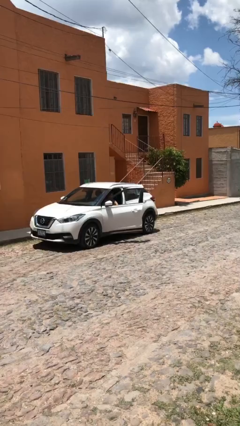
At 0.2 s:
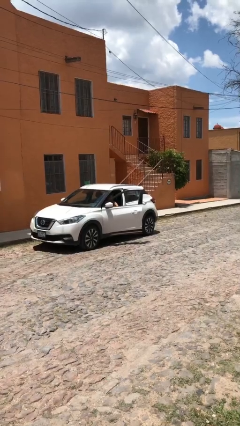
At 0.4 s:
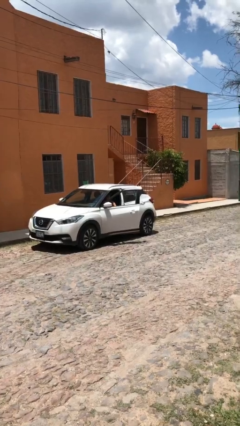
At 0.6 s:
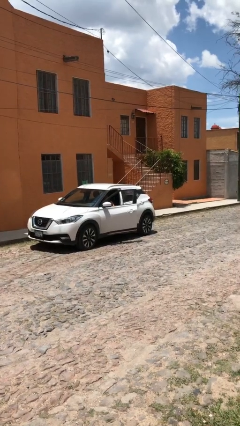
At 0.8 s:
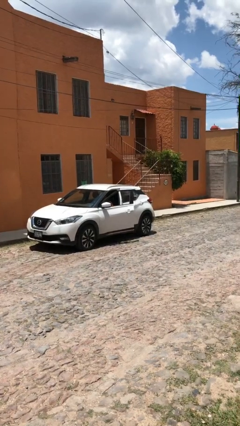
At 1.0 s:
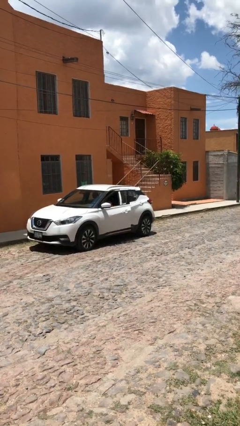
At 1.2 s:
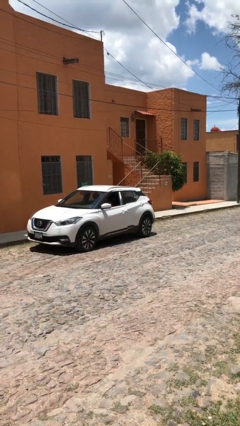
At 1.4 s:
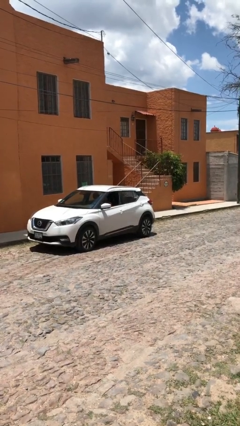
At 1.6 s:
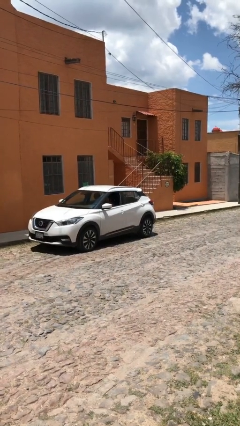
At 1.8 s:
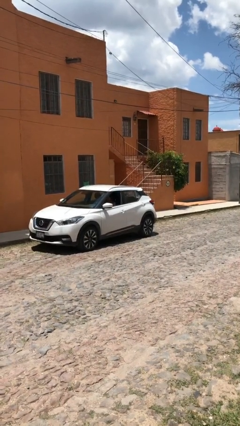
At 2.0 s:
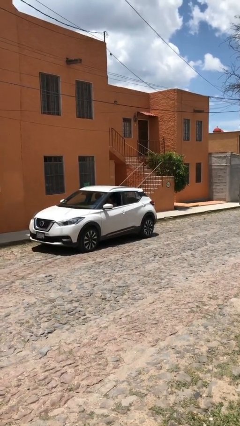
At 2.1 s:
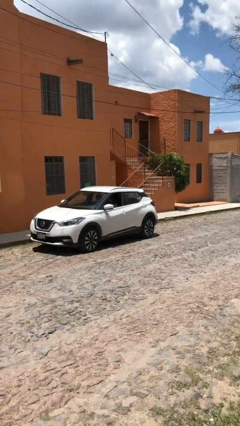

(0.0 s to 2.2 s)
person closes car door

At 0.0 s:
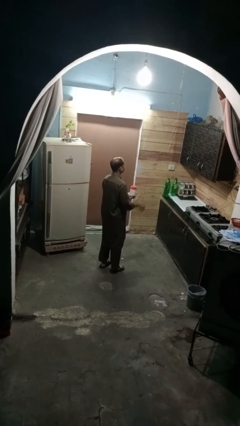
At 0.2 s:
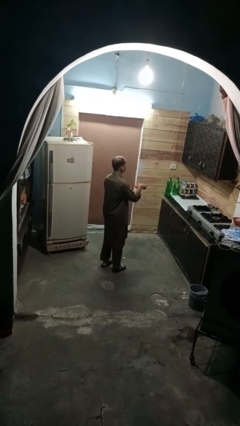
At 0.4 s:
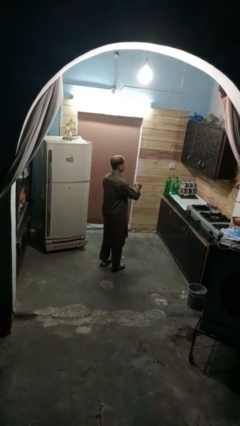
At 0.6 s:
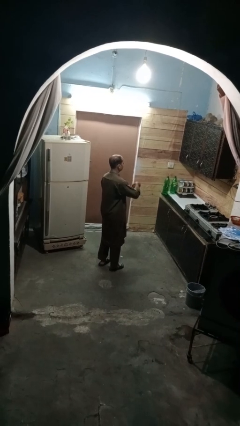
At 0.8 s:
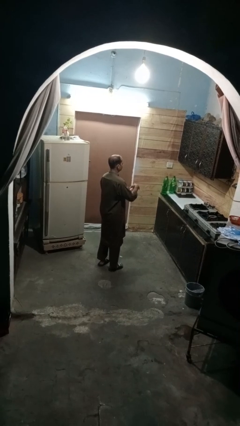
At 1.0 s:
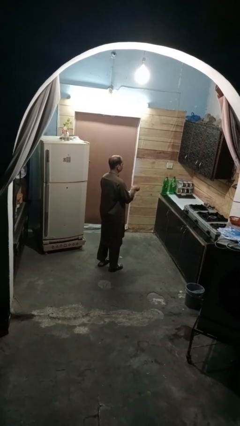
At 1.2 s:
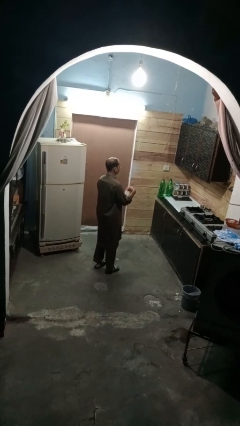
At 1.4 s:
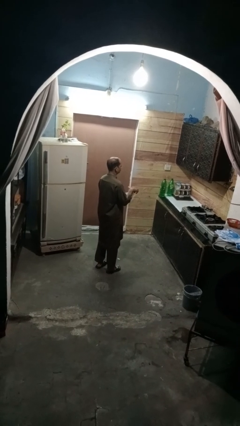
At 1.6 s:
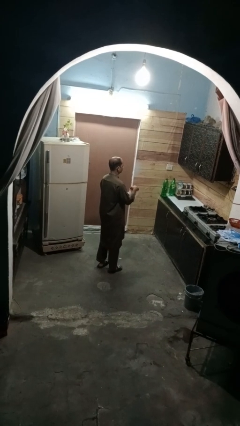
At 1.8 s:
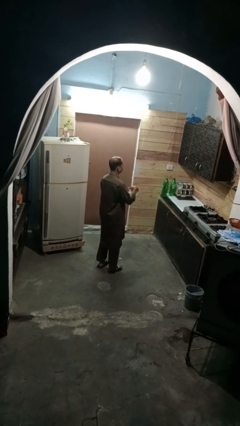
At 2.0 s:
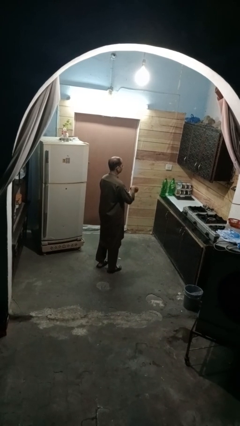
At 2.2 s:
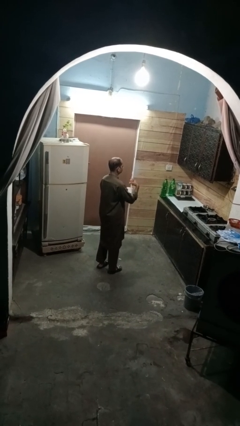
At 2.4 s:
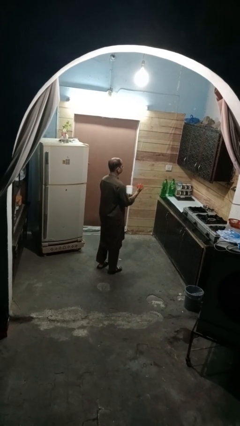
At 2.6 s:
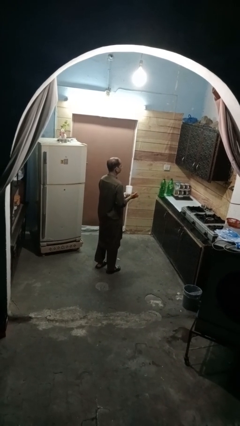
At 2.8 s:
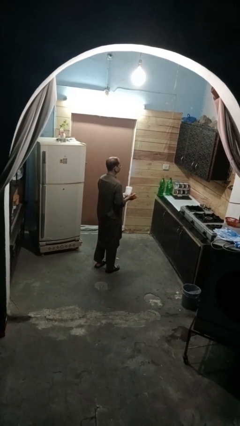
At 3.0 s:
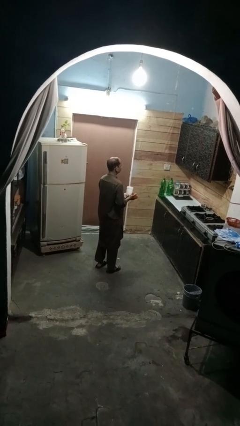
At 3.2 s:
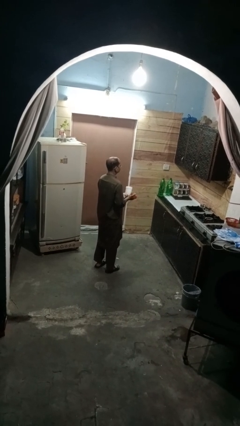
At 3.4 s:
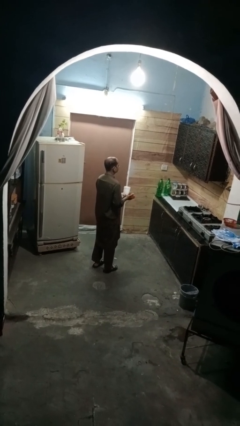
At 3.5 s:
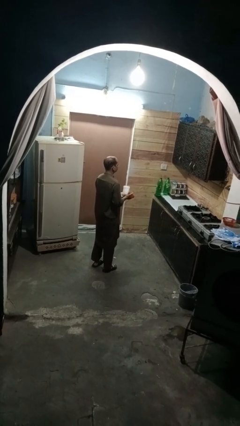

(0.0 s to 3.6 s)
person opens jar

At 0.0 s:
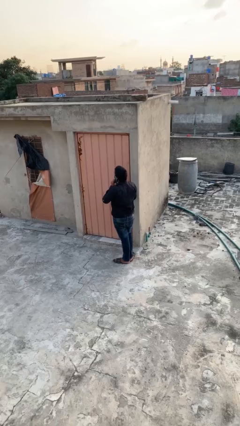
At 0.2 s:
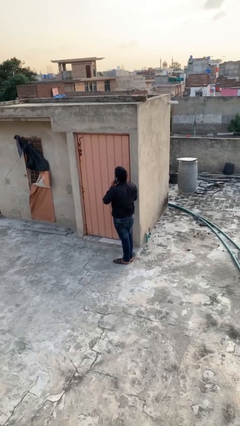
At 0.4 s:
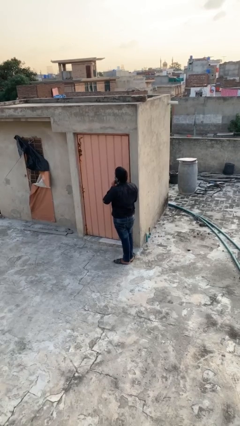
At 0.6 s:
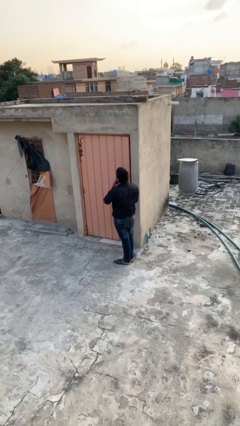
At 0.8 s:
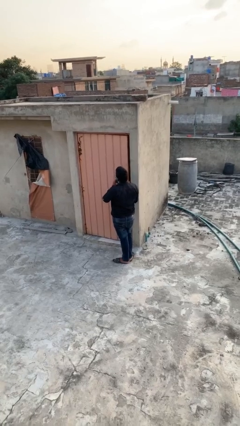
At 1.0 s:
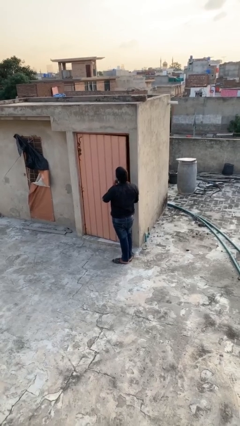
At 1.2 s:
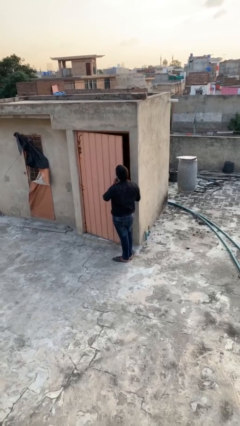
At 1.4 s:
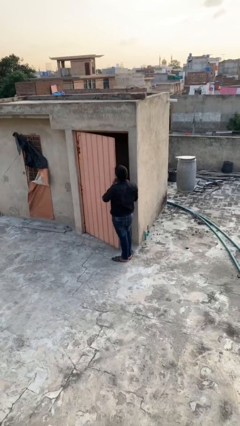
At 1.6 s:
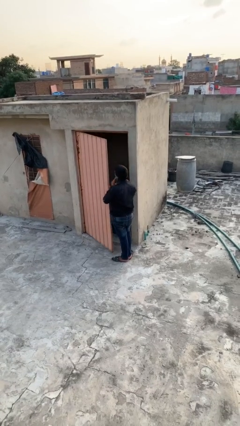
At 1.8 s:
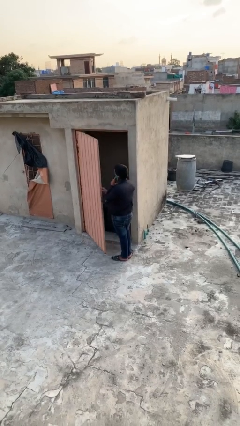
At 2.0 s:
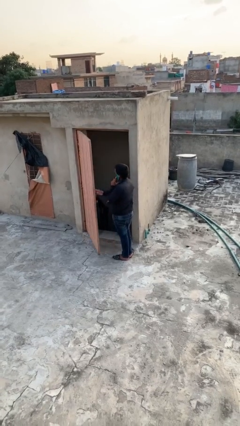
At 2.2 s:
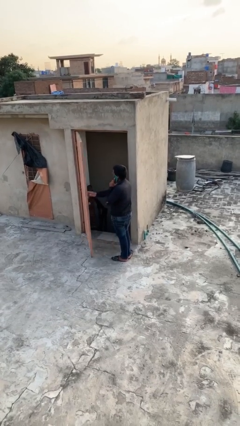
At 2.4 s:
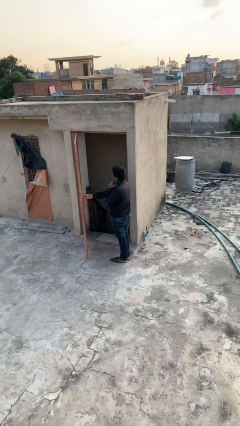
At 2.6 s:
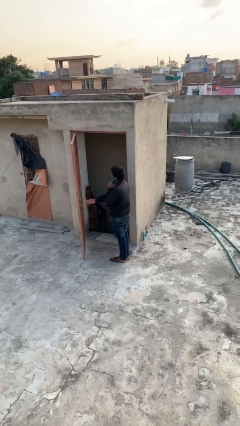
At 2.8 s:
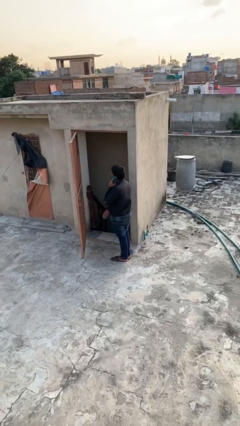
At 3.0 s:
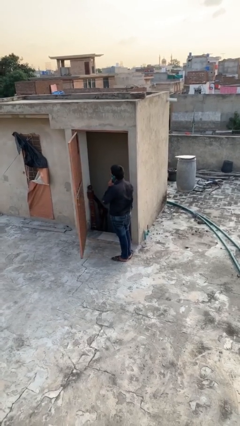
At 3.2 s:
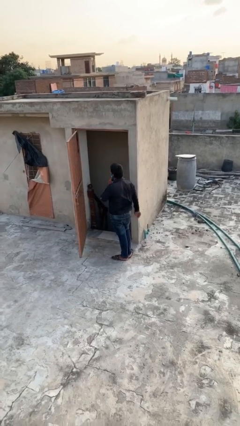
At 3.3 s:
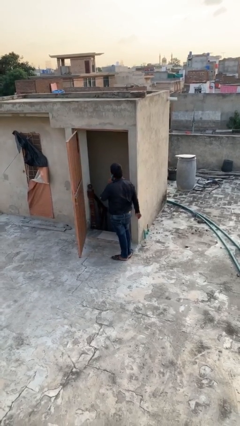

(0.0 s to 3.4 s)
person opens facility door

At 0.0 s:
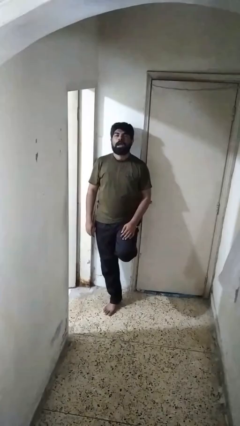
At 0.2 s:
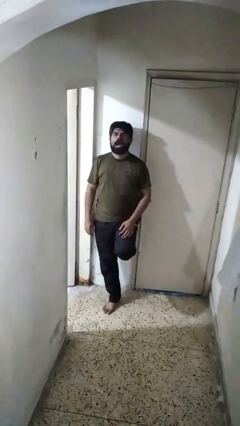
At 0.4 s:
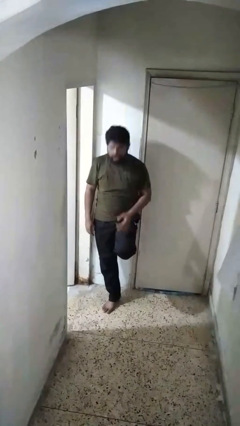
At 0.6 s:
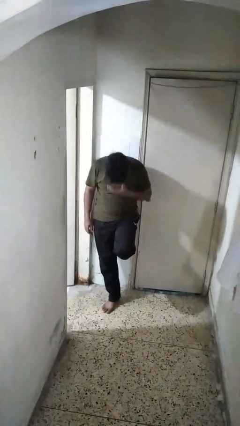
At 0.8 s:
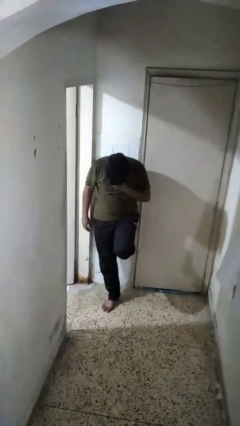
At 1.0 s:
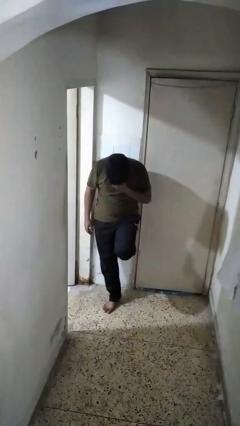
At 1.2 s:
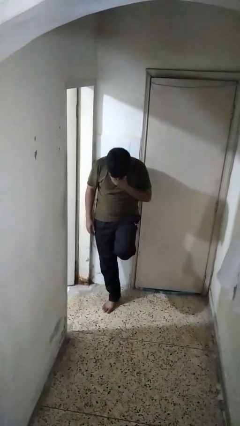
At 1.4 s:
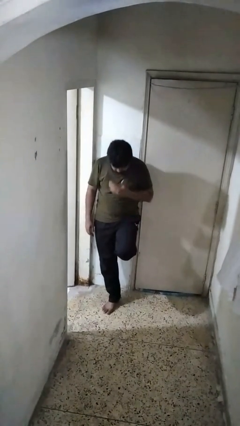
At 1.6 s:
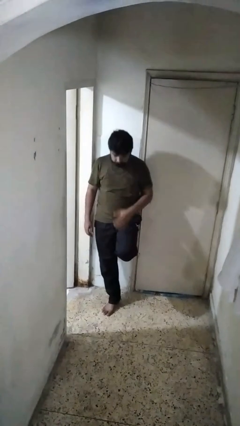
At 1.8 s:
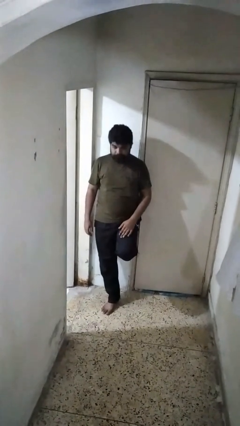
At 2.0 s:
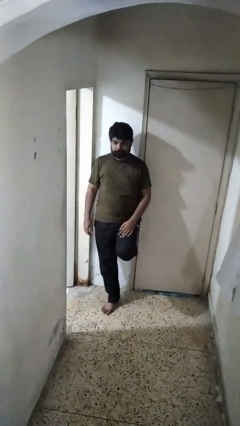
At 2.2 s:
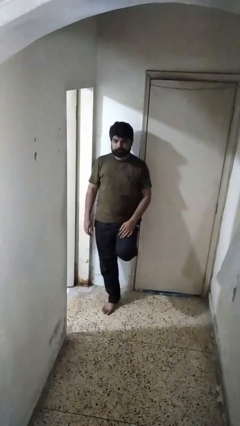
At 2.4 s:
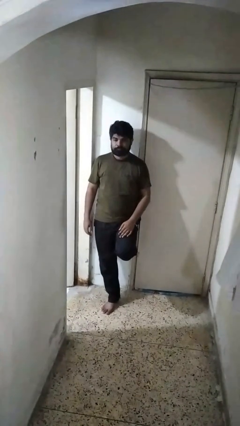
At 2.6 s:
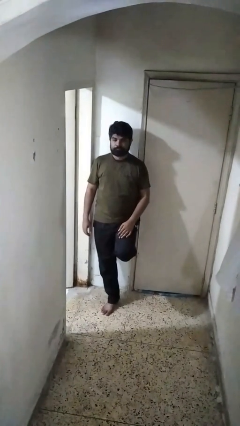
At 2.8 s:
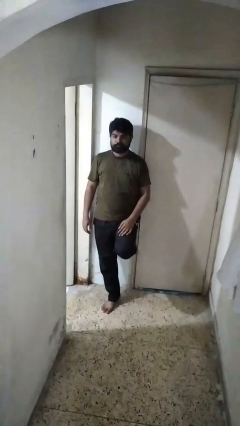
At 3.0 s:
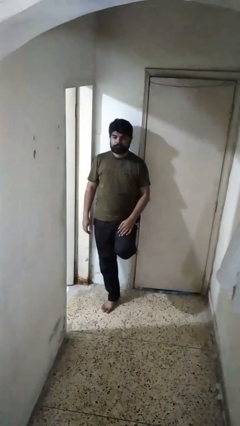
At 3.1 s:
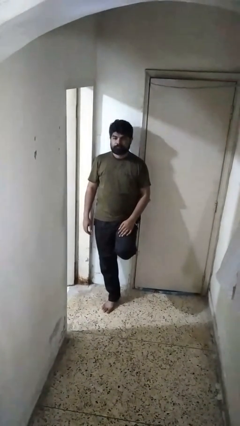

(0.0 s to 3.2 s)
person sneezes into hand

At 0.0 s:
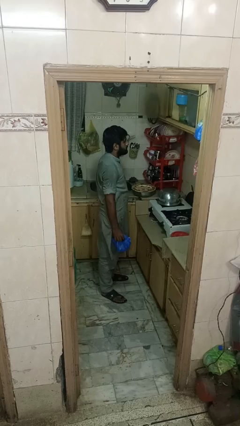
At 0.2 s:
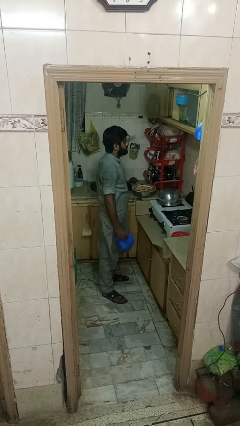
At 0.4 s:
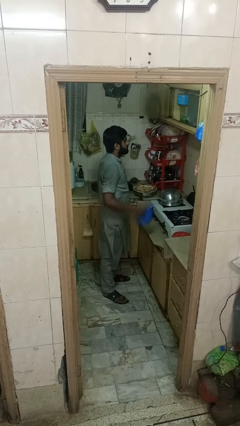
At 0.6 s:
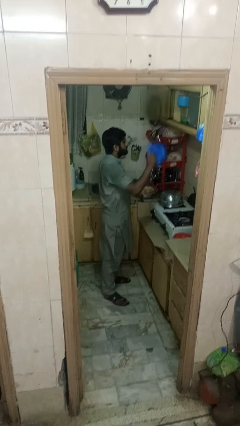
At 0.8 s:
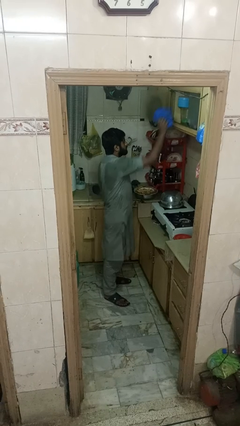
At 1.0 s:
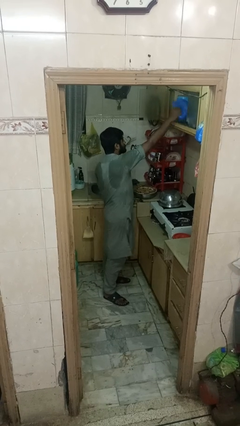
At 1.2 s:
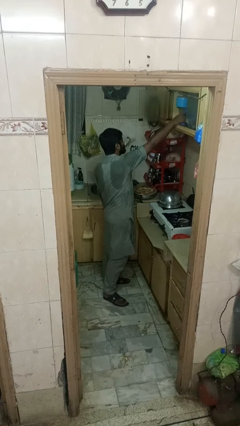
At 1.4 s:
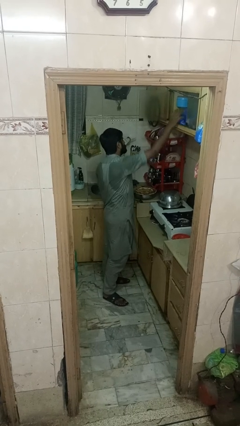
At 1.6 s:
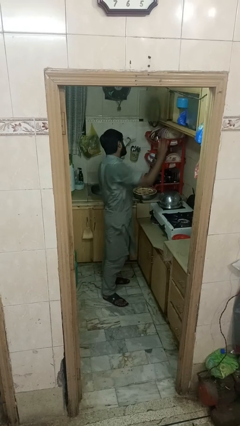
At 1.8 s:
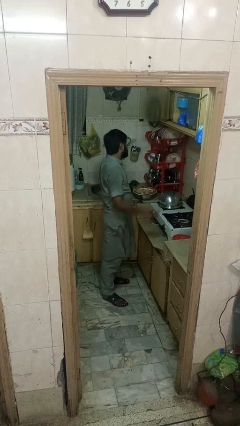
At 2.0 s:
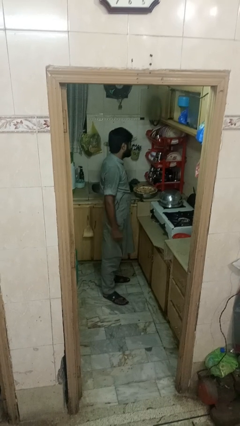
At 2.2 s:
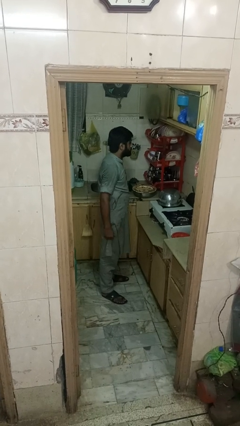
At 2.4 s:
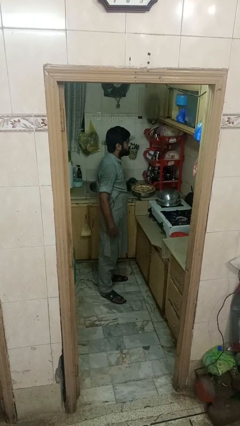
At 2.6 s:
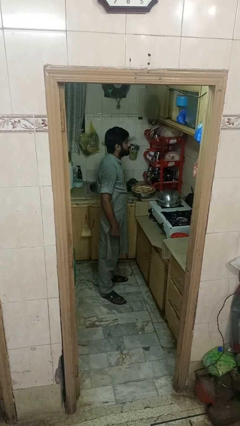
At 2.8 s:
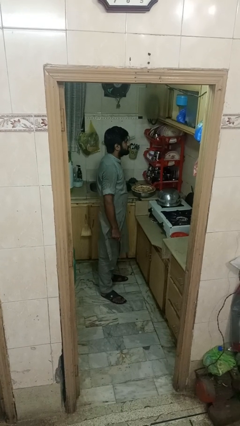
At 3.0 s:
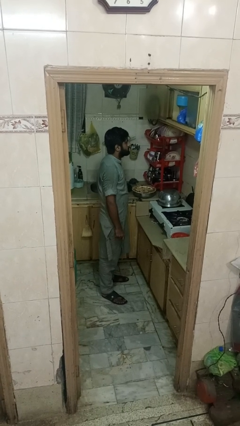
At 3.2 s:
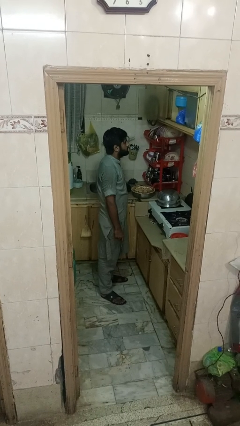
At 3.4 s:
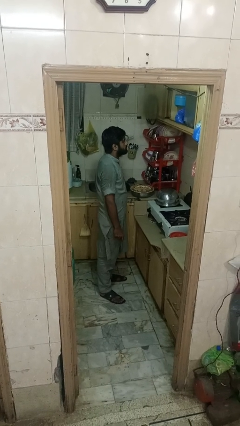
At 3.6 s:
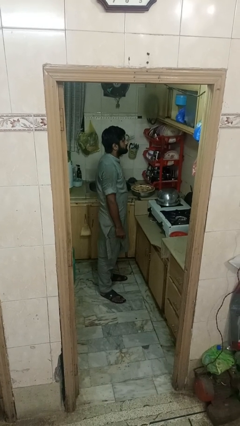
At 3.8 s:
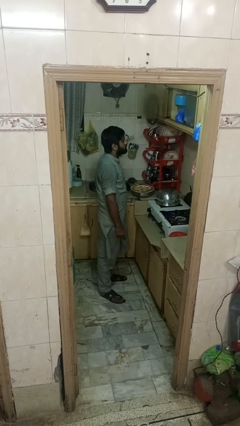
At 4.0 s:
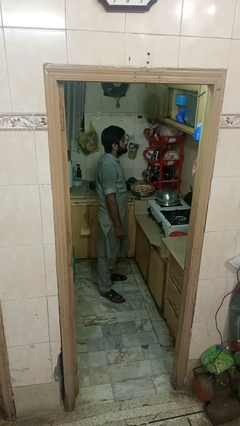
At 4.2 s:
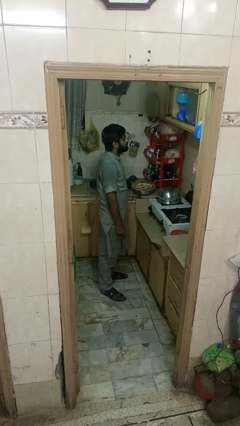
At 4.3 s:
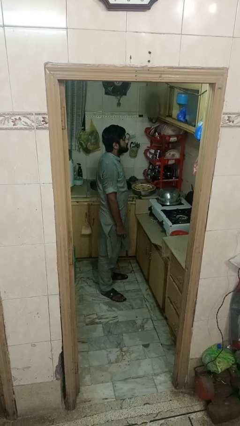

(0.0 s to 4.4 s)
person loads groceries into cabinet

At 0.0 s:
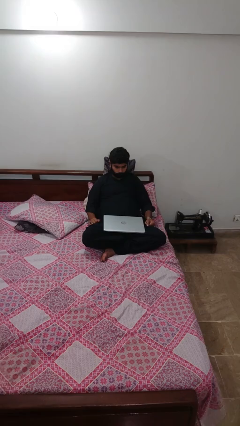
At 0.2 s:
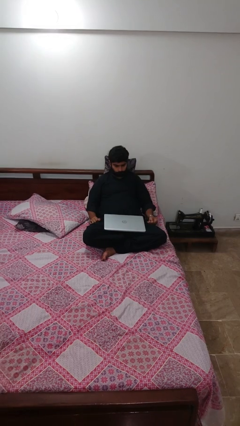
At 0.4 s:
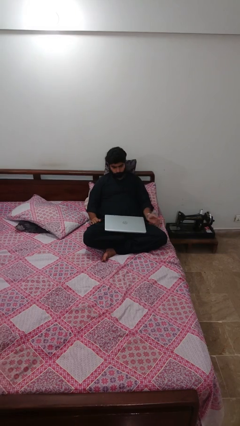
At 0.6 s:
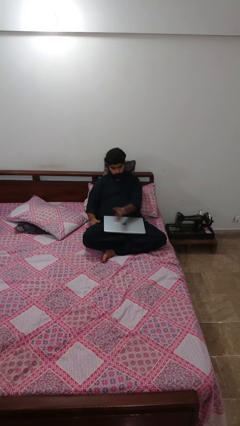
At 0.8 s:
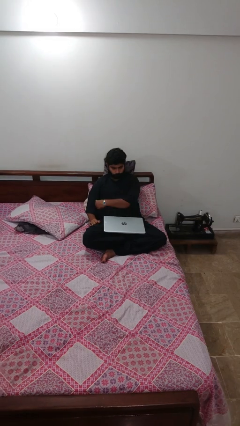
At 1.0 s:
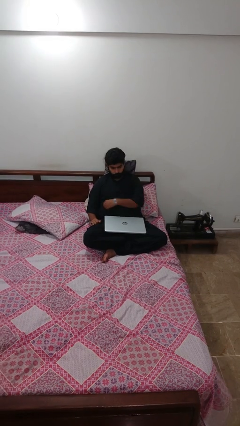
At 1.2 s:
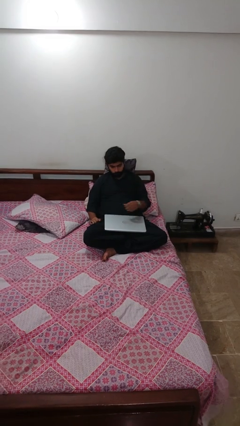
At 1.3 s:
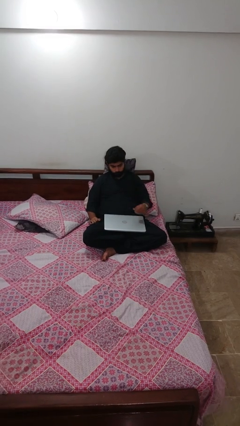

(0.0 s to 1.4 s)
person waves hand over object
